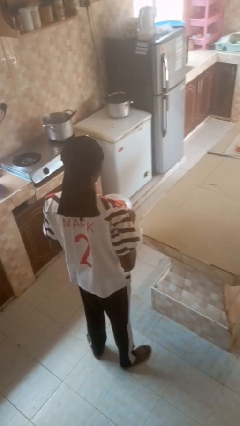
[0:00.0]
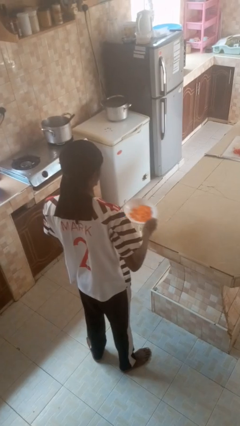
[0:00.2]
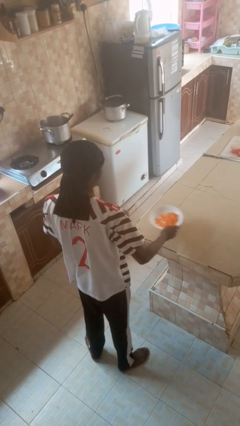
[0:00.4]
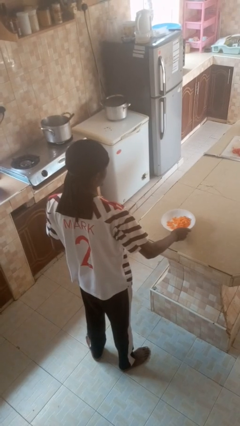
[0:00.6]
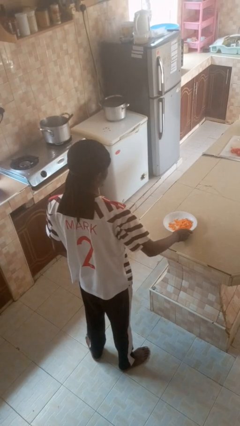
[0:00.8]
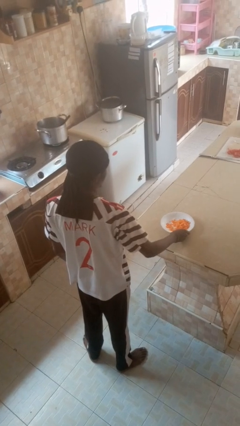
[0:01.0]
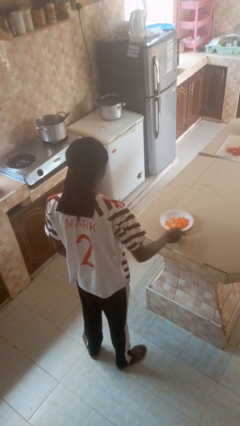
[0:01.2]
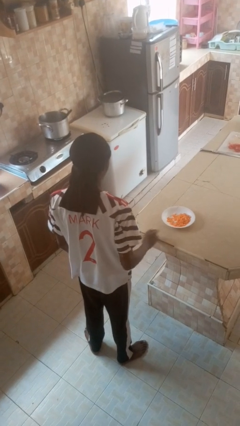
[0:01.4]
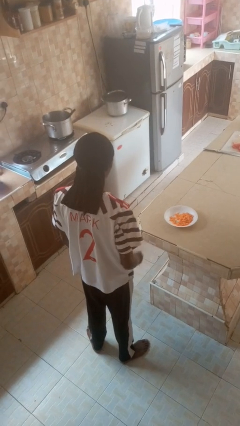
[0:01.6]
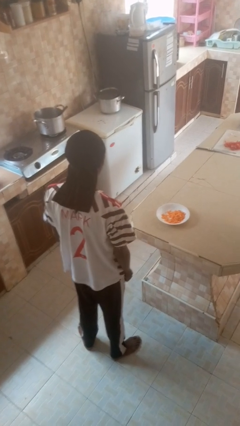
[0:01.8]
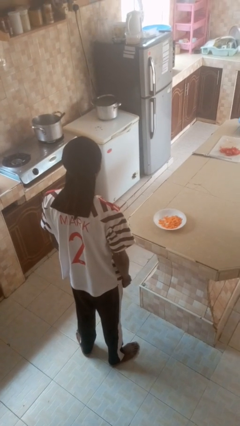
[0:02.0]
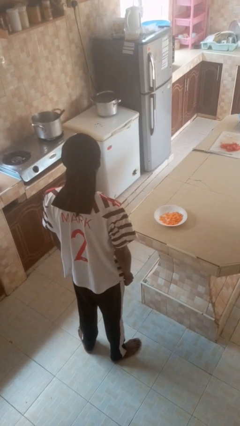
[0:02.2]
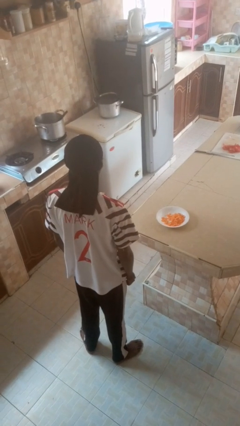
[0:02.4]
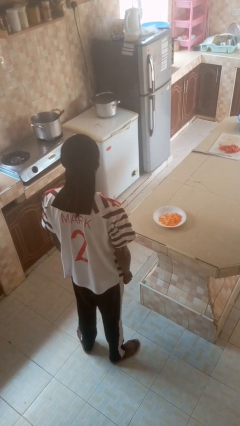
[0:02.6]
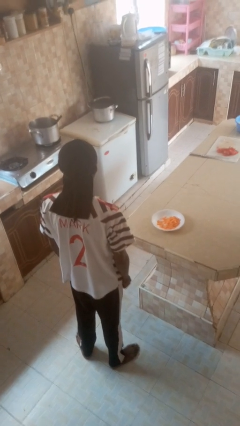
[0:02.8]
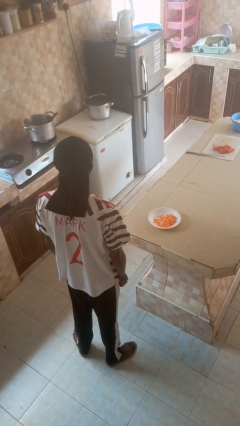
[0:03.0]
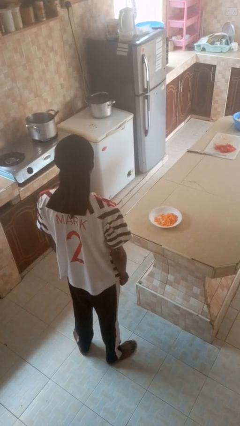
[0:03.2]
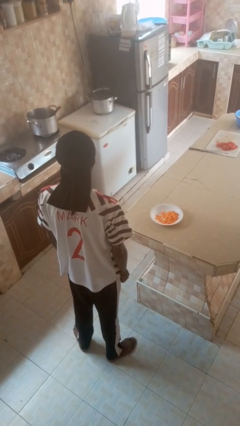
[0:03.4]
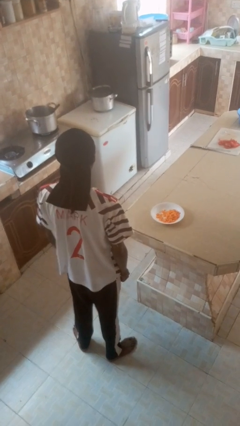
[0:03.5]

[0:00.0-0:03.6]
person puts down object on countertop

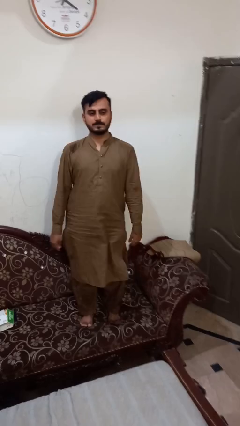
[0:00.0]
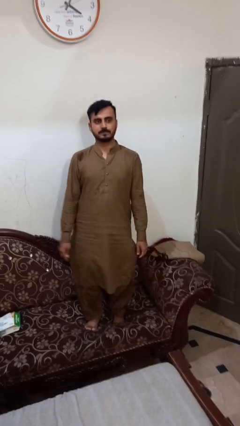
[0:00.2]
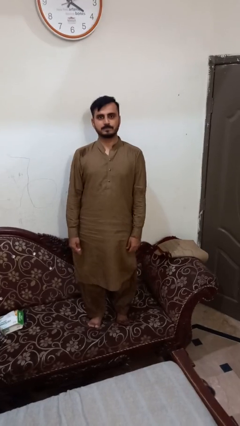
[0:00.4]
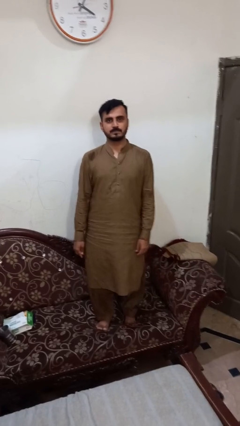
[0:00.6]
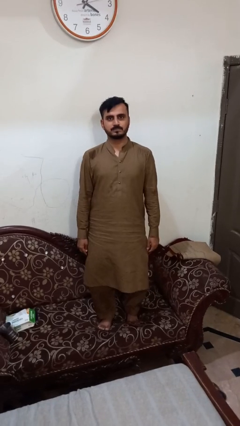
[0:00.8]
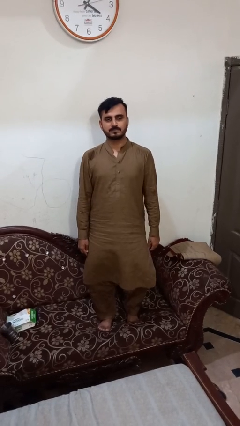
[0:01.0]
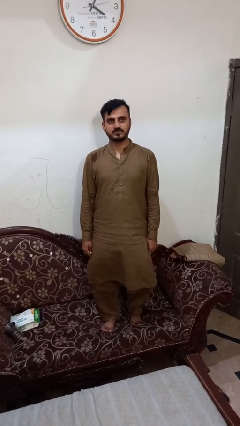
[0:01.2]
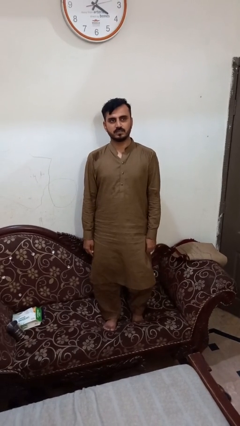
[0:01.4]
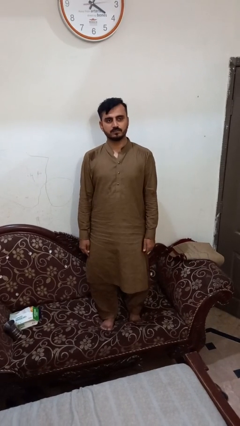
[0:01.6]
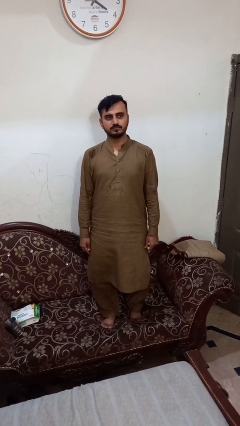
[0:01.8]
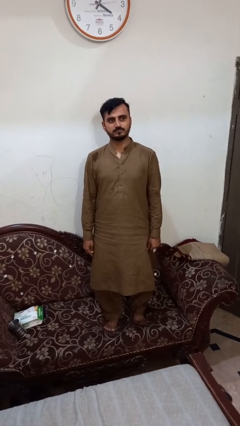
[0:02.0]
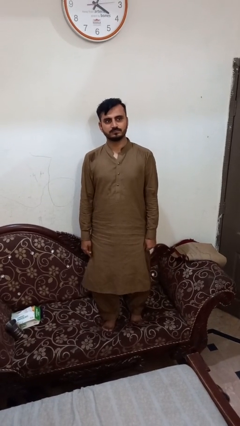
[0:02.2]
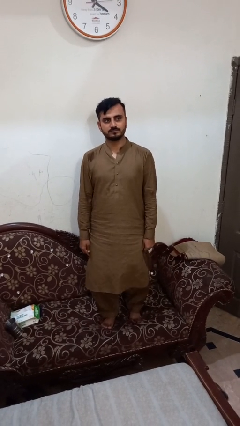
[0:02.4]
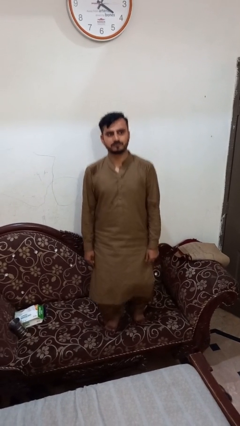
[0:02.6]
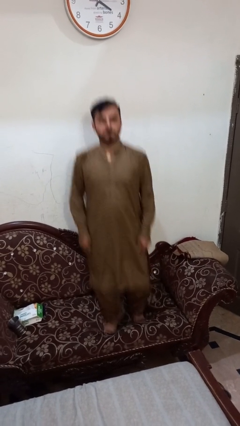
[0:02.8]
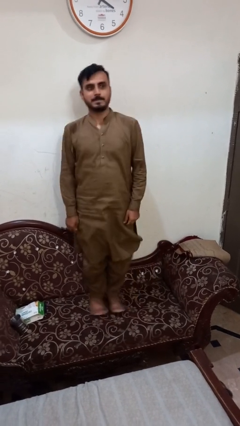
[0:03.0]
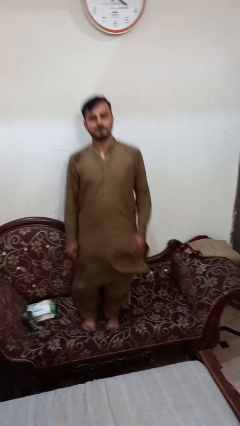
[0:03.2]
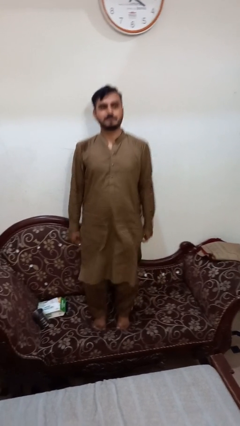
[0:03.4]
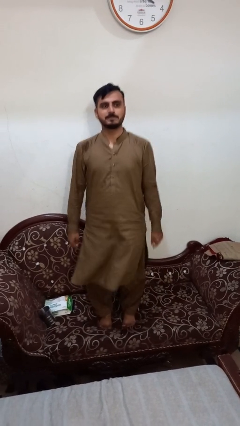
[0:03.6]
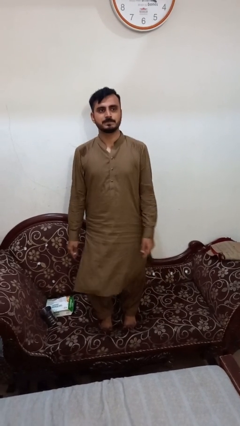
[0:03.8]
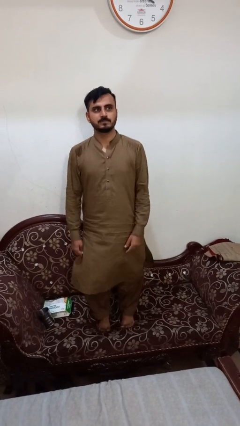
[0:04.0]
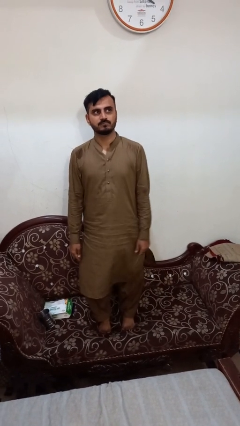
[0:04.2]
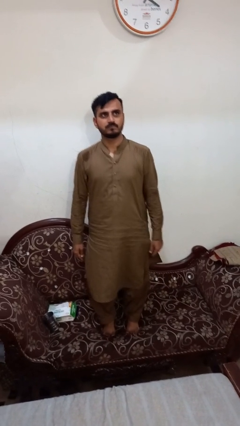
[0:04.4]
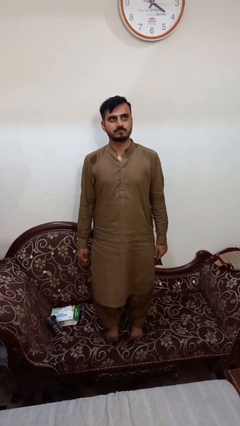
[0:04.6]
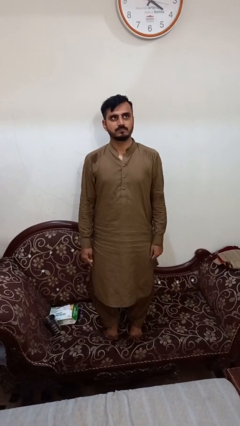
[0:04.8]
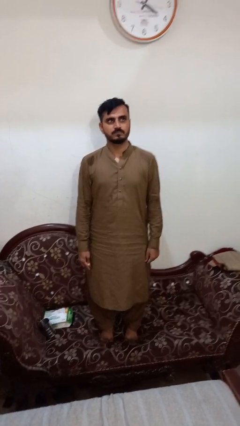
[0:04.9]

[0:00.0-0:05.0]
person jumps on couch

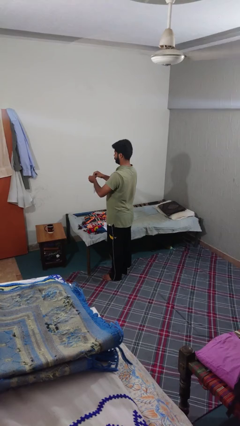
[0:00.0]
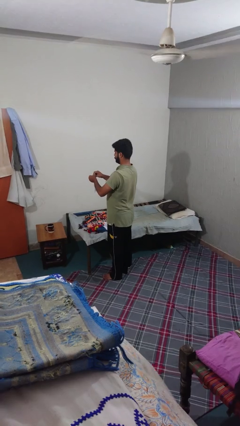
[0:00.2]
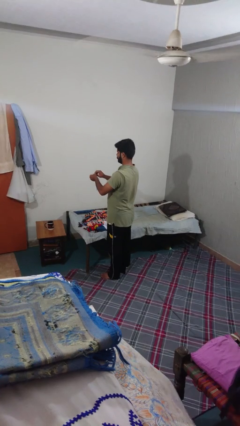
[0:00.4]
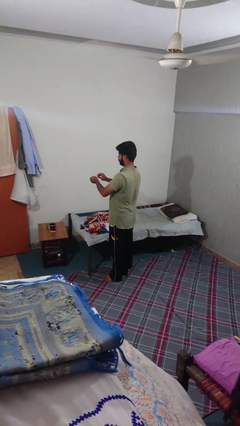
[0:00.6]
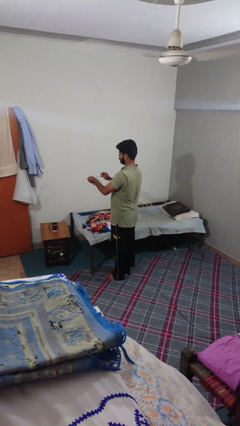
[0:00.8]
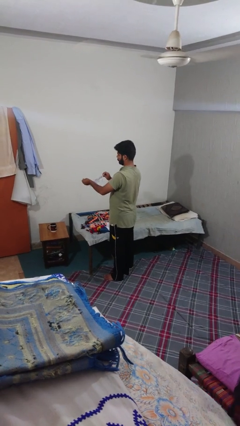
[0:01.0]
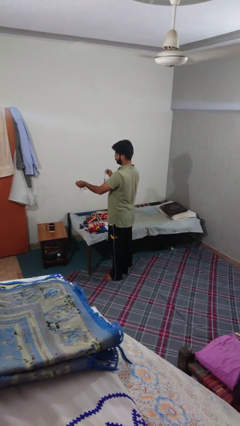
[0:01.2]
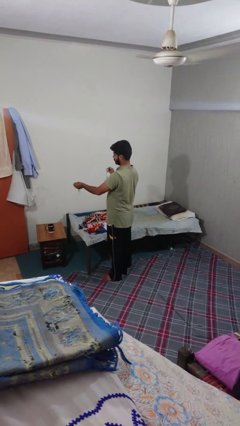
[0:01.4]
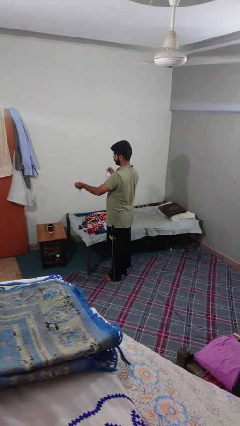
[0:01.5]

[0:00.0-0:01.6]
person tears paper

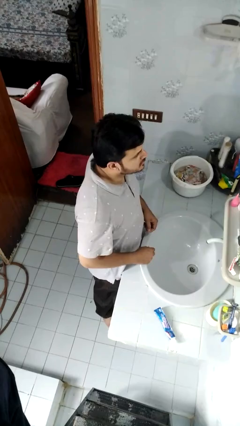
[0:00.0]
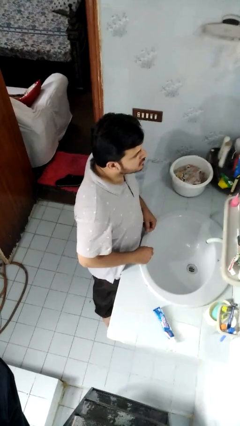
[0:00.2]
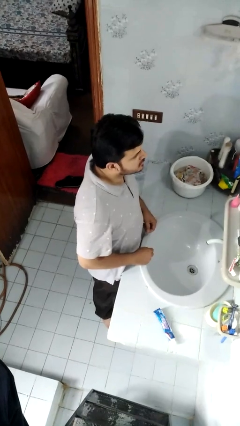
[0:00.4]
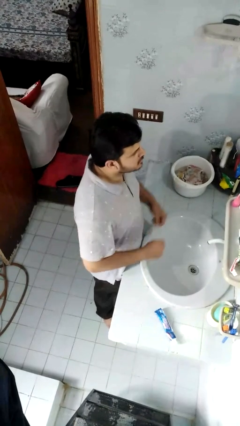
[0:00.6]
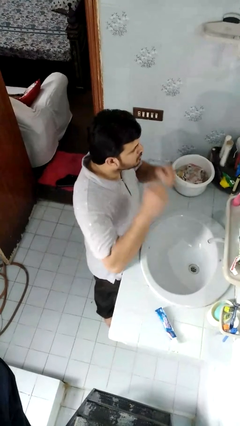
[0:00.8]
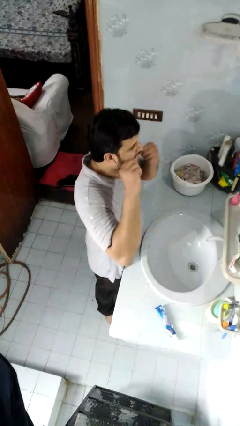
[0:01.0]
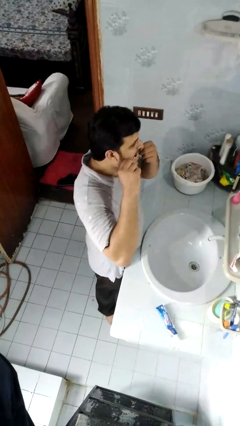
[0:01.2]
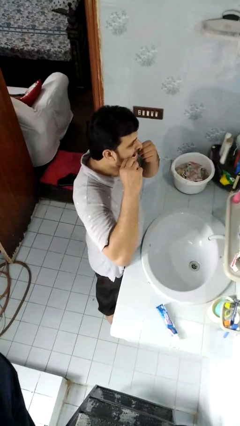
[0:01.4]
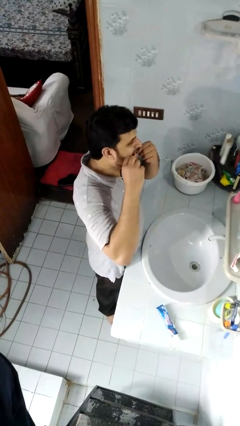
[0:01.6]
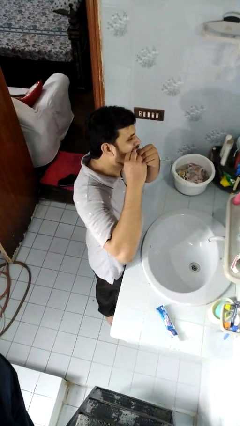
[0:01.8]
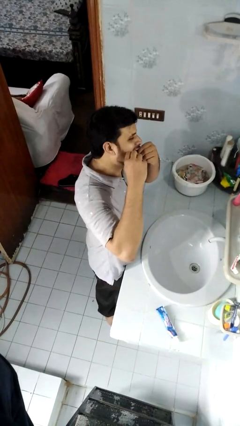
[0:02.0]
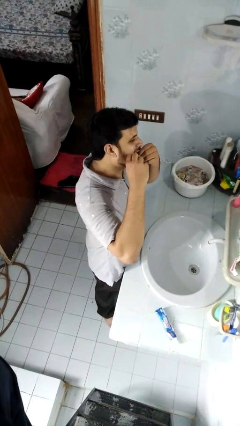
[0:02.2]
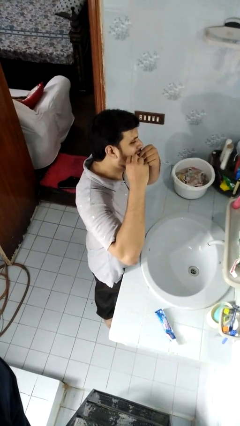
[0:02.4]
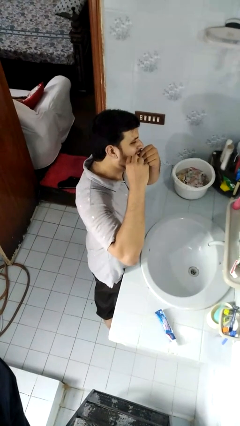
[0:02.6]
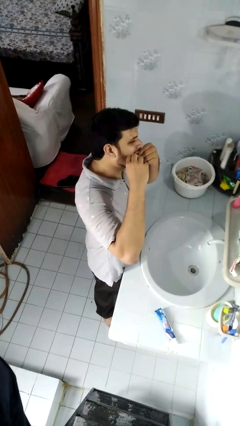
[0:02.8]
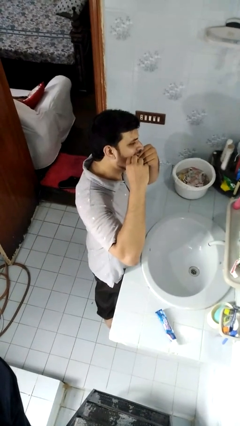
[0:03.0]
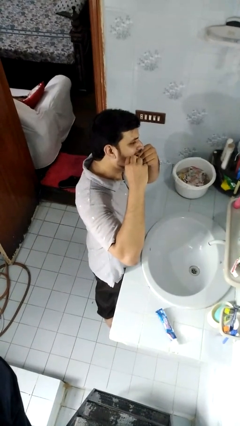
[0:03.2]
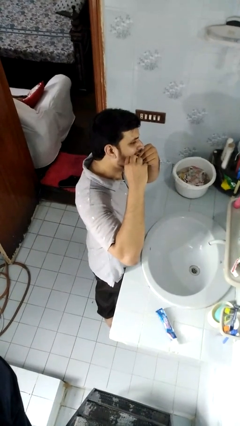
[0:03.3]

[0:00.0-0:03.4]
person flosses

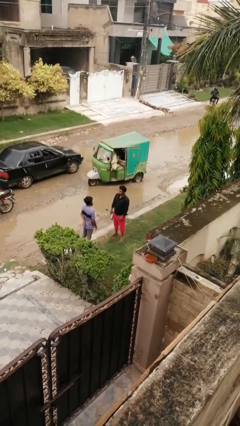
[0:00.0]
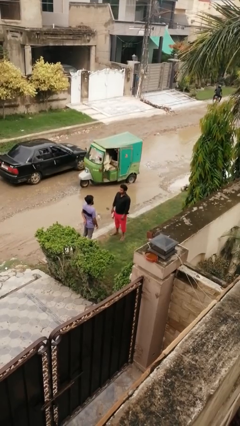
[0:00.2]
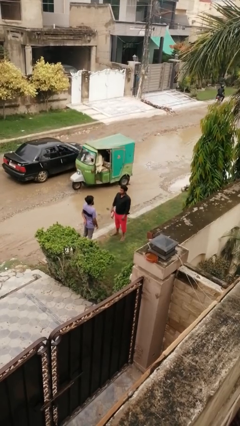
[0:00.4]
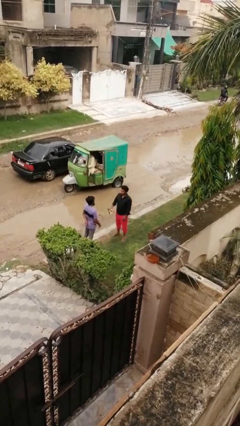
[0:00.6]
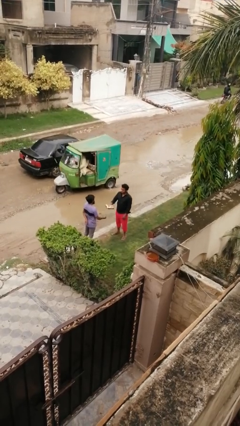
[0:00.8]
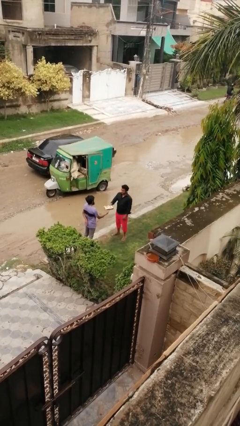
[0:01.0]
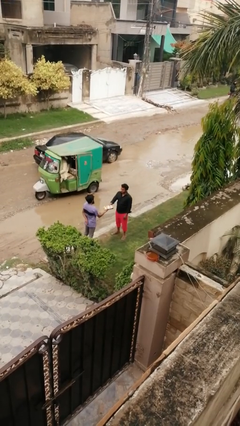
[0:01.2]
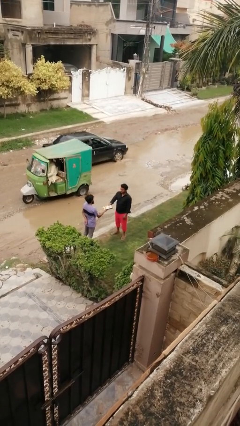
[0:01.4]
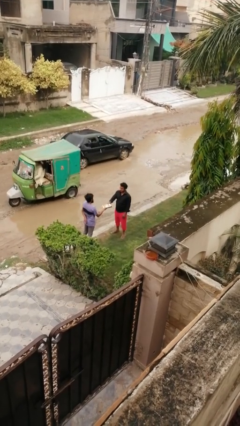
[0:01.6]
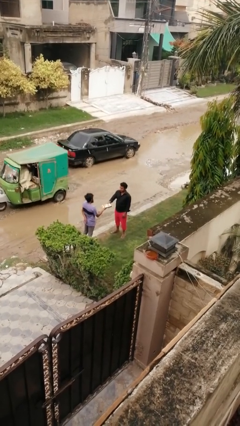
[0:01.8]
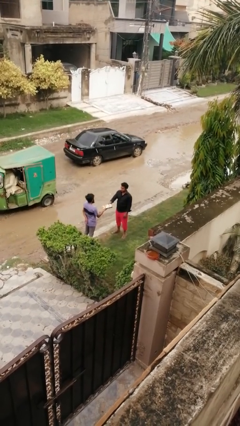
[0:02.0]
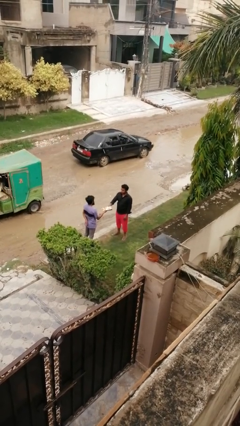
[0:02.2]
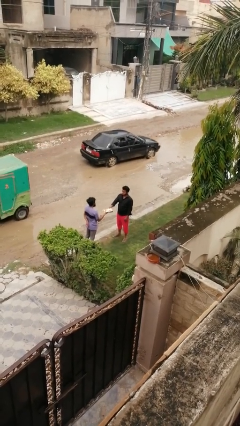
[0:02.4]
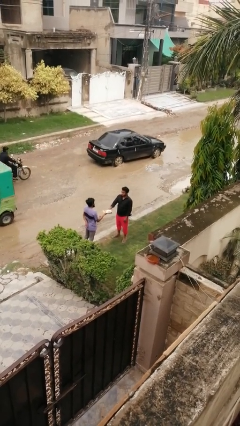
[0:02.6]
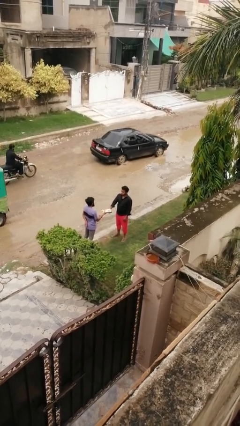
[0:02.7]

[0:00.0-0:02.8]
person transfers object to person

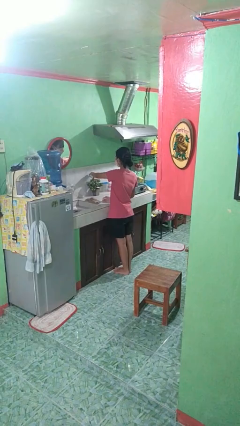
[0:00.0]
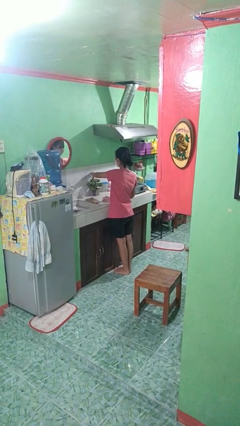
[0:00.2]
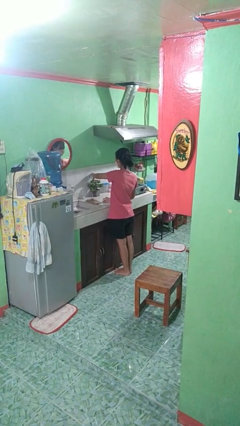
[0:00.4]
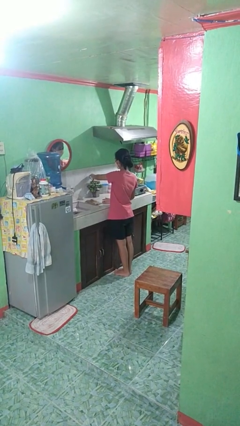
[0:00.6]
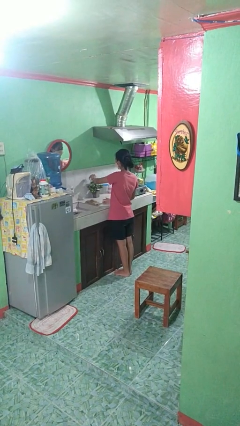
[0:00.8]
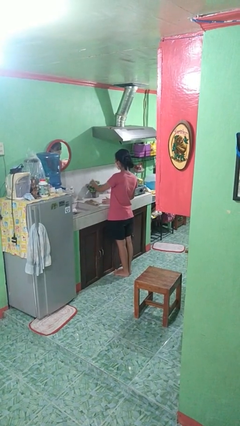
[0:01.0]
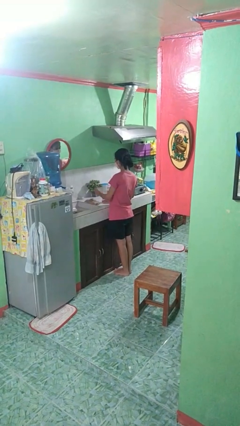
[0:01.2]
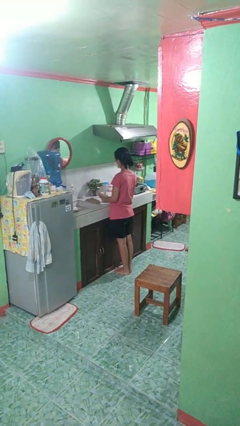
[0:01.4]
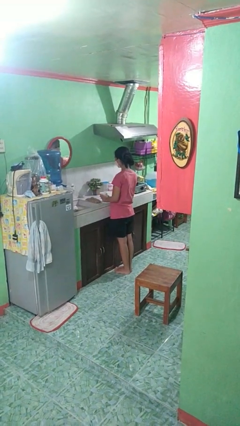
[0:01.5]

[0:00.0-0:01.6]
person waters houseplant
